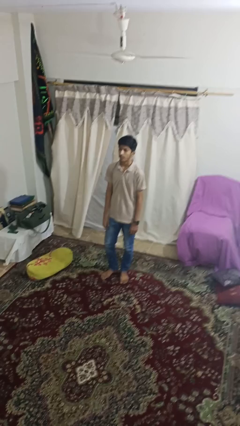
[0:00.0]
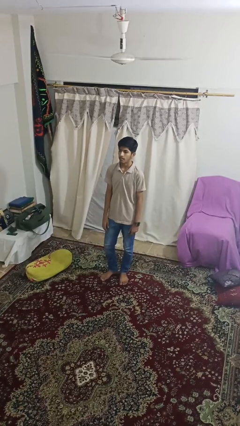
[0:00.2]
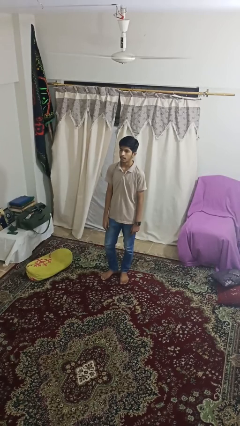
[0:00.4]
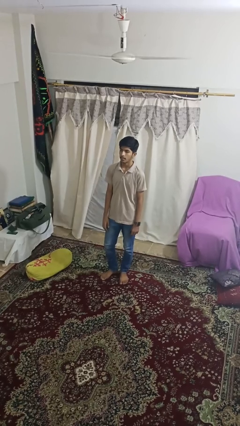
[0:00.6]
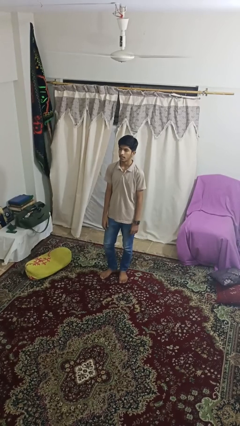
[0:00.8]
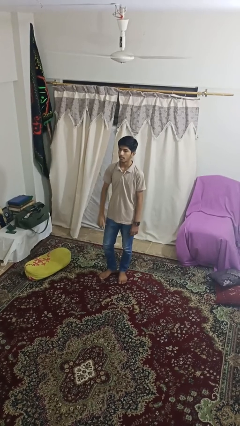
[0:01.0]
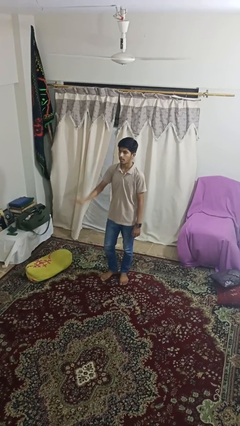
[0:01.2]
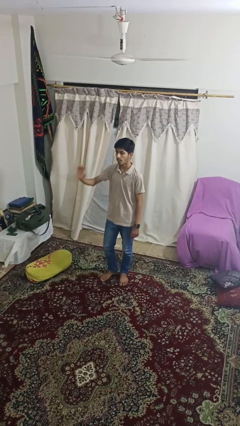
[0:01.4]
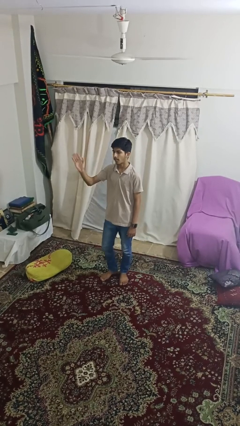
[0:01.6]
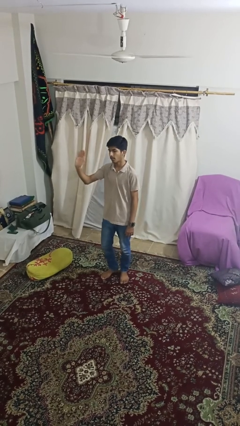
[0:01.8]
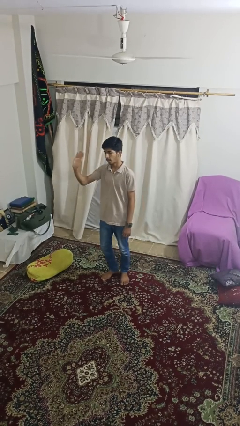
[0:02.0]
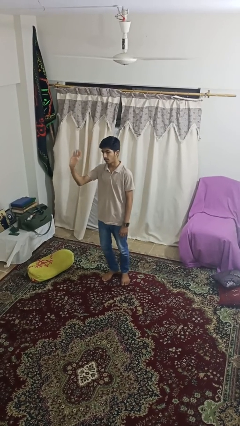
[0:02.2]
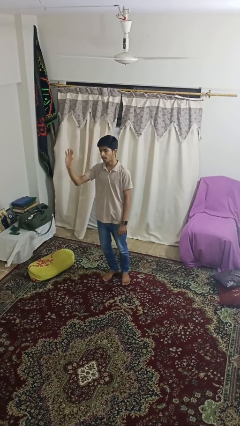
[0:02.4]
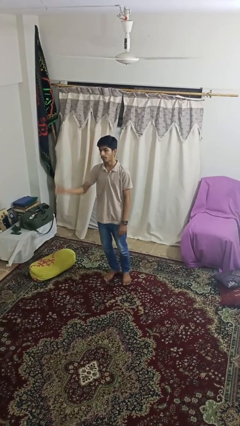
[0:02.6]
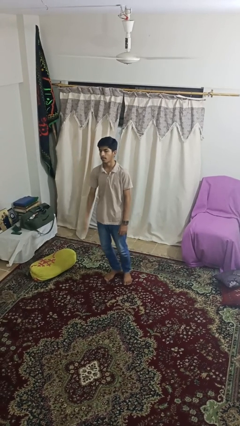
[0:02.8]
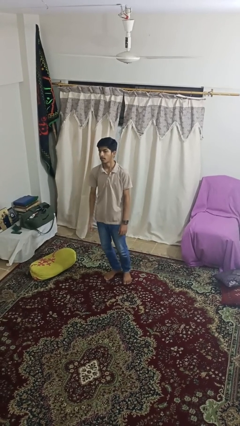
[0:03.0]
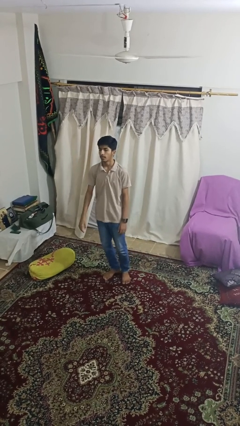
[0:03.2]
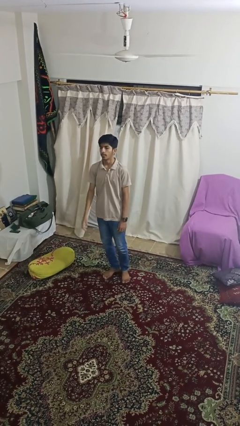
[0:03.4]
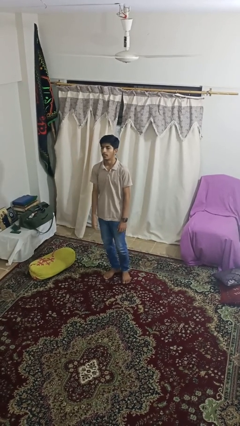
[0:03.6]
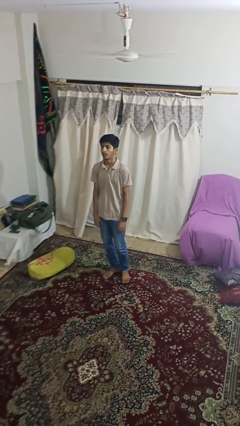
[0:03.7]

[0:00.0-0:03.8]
person waves at person

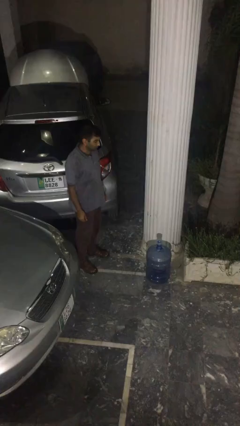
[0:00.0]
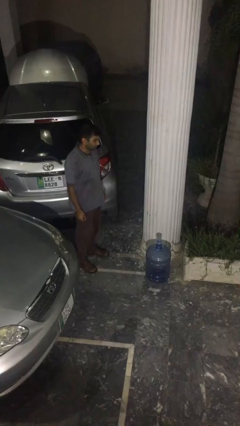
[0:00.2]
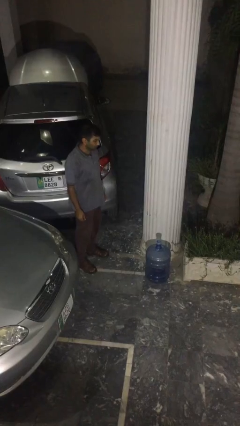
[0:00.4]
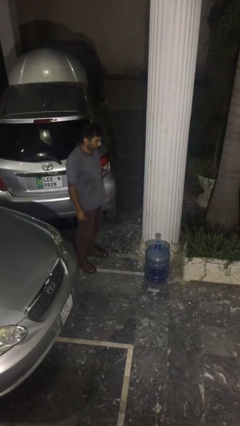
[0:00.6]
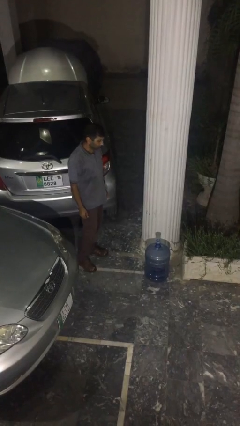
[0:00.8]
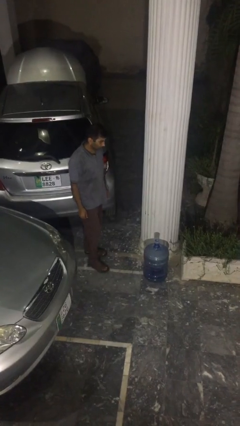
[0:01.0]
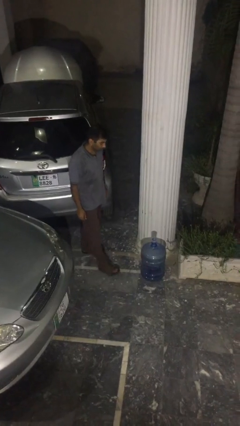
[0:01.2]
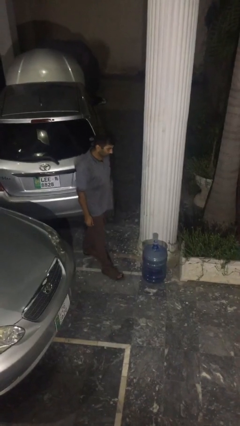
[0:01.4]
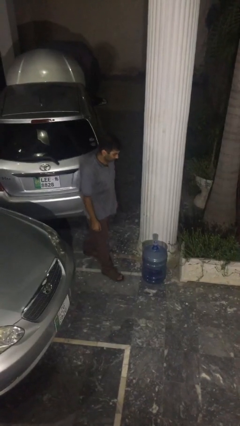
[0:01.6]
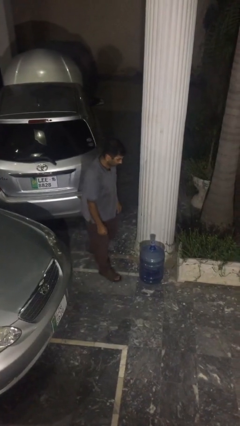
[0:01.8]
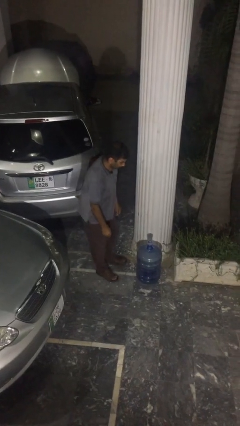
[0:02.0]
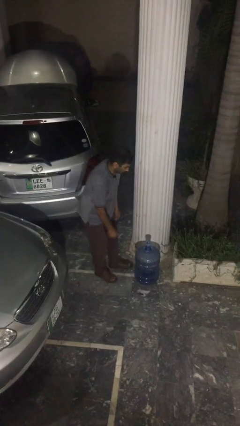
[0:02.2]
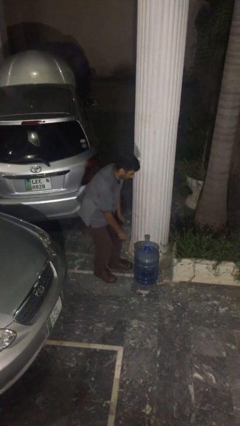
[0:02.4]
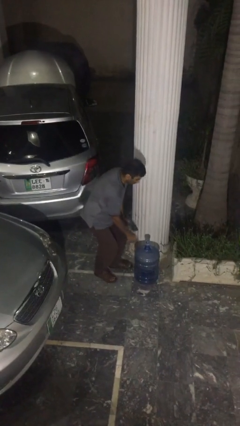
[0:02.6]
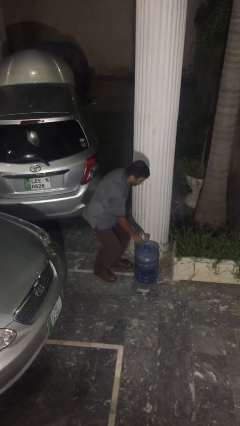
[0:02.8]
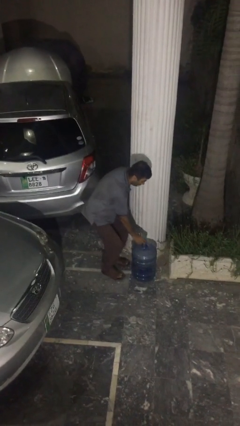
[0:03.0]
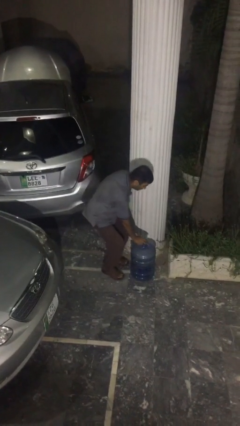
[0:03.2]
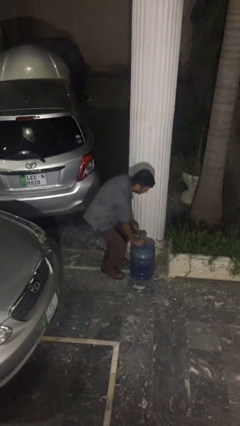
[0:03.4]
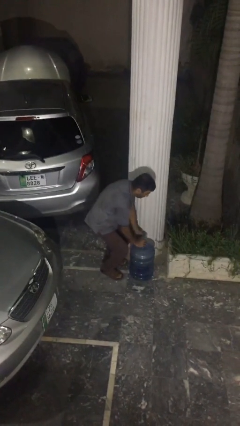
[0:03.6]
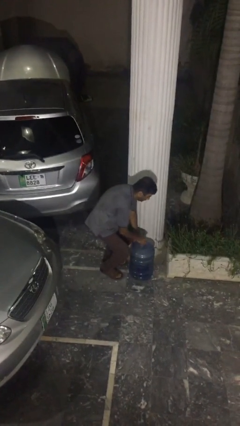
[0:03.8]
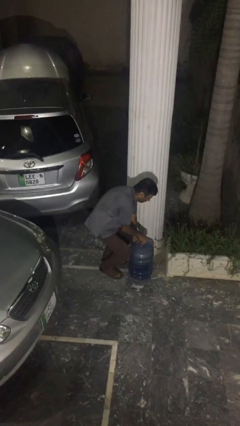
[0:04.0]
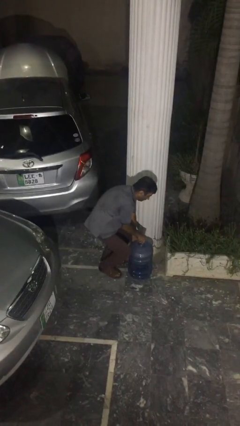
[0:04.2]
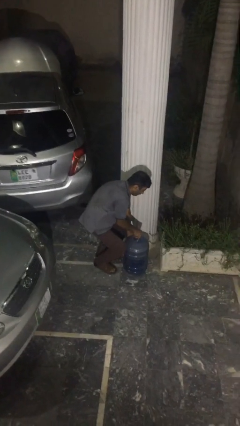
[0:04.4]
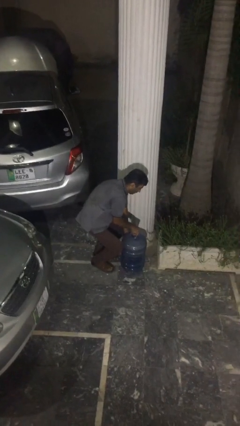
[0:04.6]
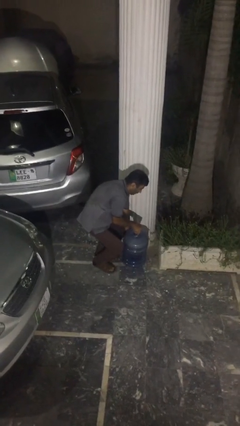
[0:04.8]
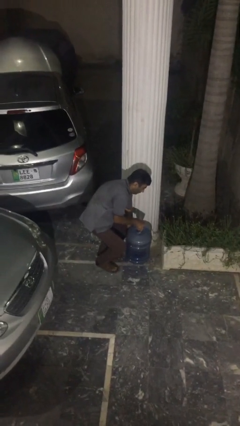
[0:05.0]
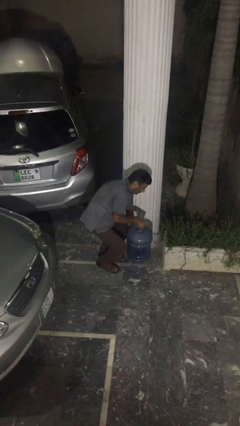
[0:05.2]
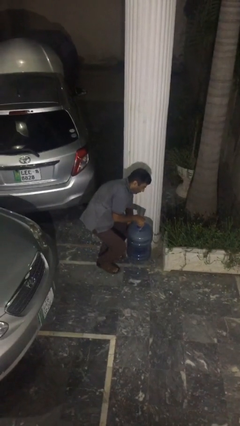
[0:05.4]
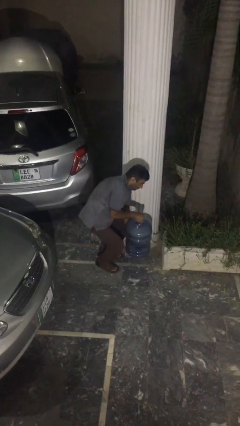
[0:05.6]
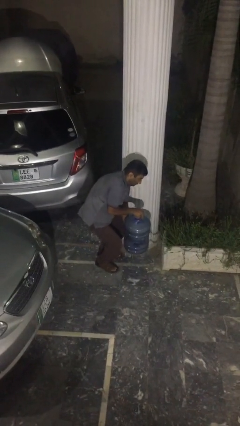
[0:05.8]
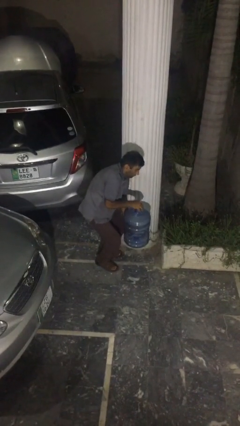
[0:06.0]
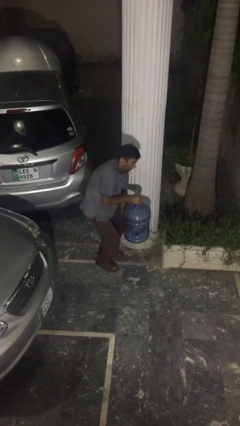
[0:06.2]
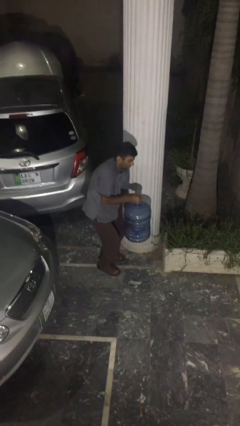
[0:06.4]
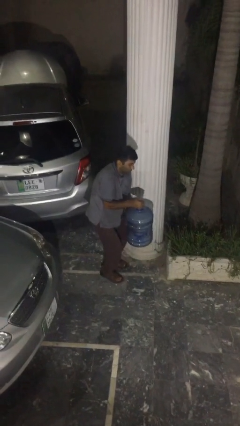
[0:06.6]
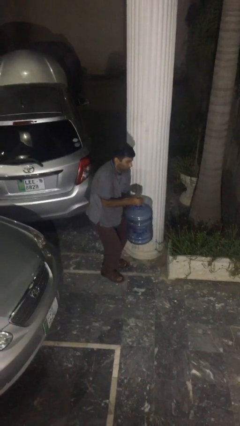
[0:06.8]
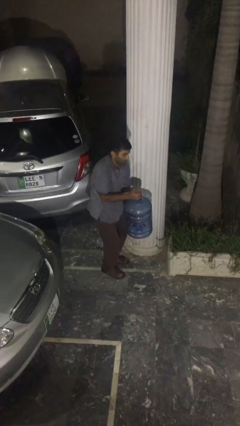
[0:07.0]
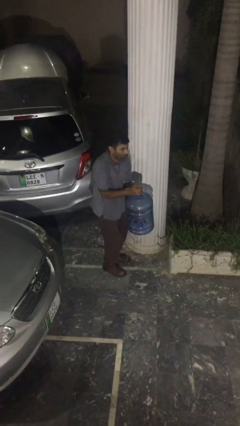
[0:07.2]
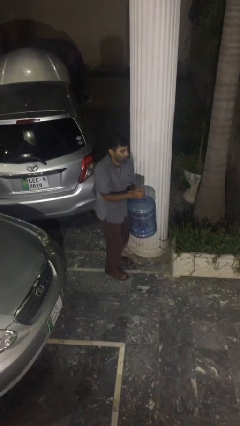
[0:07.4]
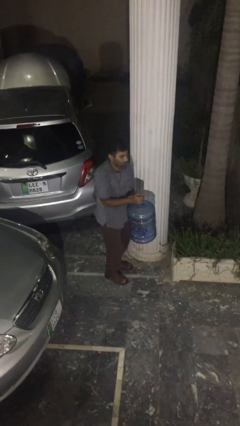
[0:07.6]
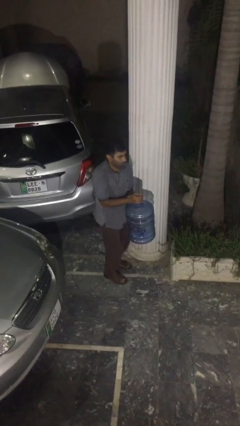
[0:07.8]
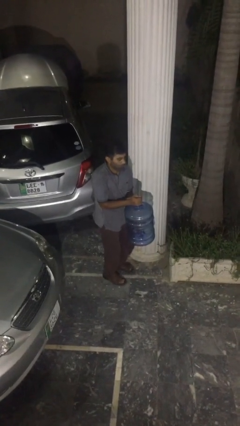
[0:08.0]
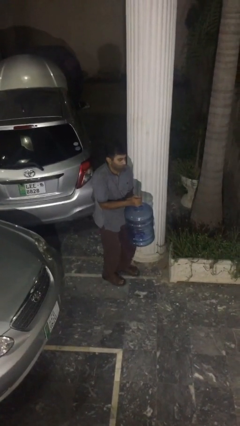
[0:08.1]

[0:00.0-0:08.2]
person picks up object from floor

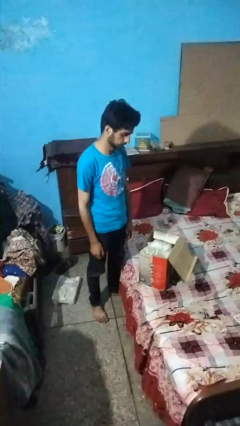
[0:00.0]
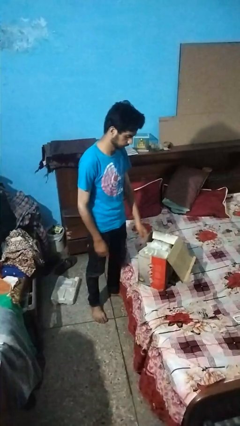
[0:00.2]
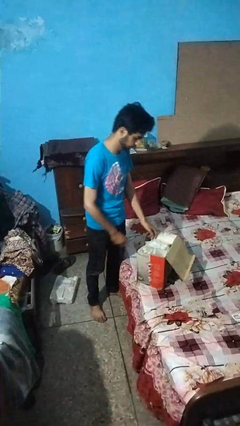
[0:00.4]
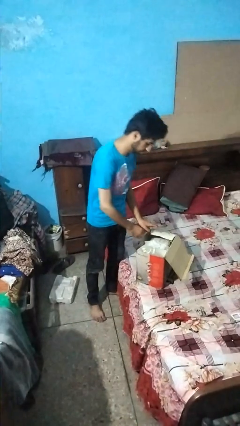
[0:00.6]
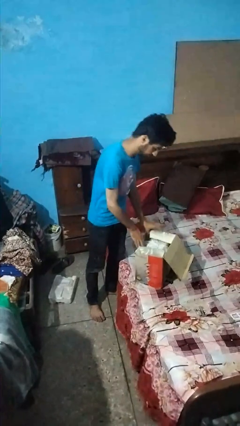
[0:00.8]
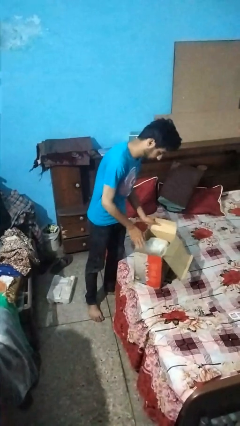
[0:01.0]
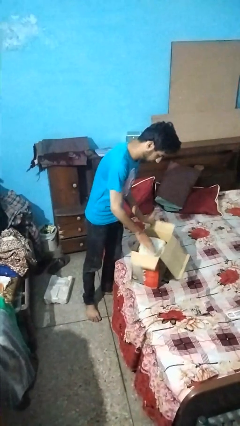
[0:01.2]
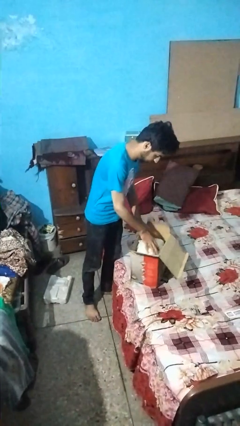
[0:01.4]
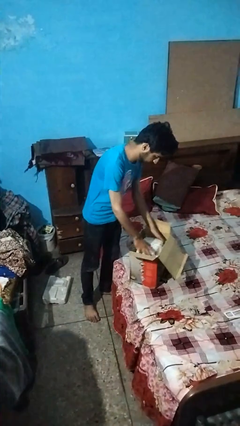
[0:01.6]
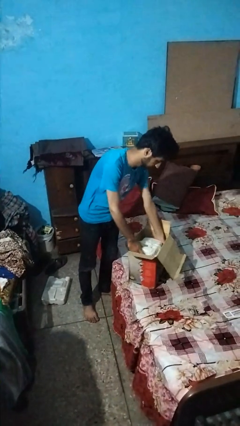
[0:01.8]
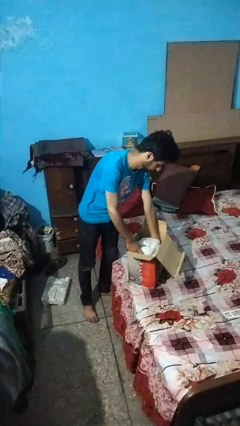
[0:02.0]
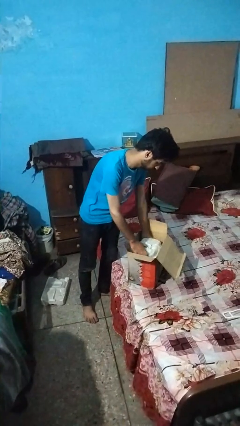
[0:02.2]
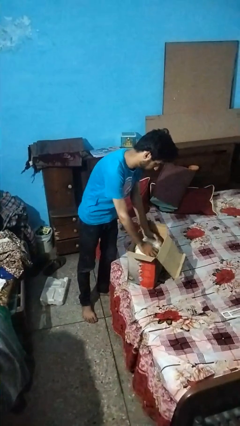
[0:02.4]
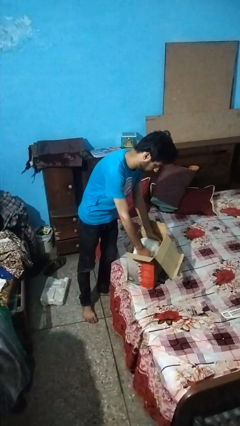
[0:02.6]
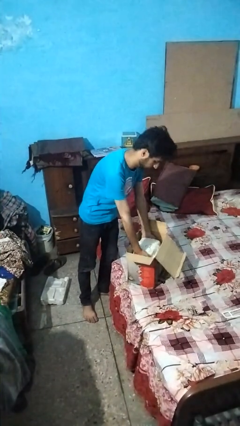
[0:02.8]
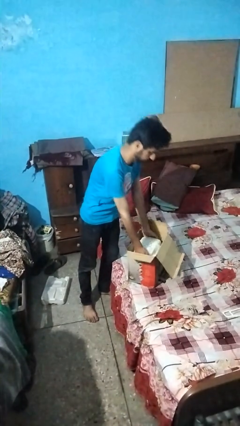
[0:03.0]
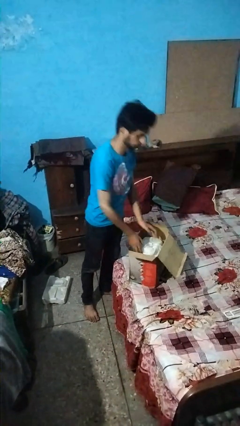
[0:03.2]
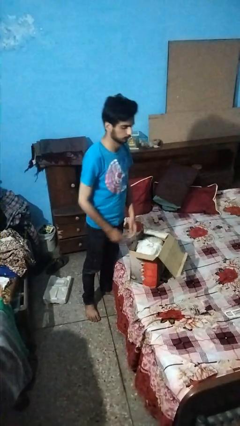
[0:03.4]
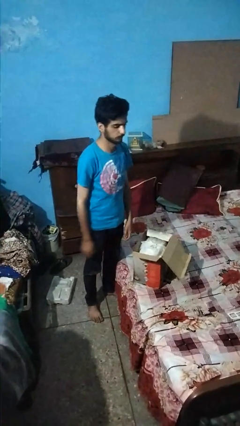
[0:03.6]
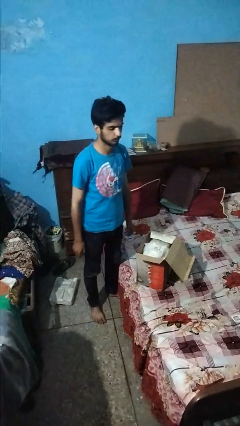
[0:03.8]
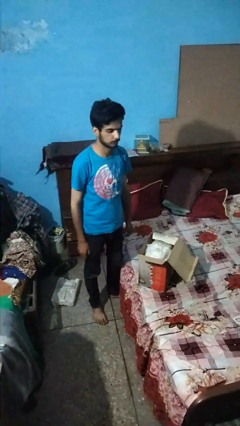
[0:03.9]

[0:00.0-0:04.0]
person searches in box

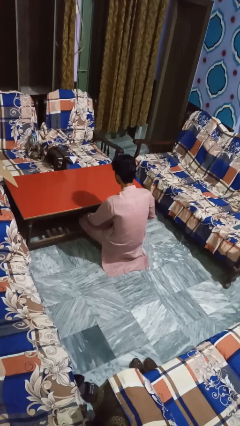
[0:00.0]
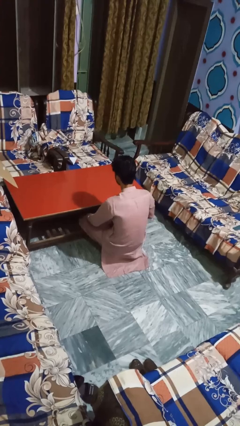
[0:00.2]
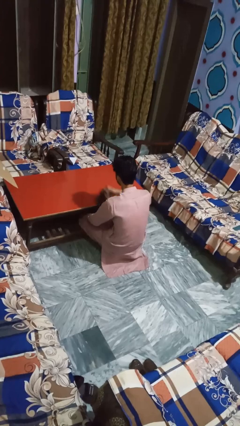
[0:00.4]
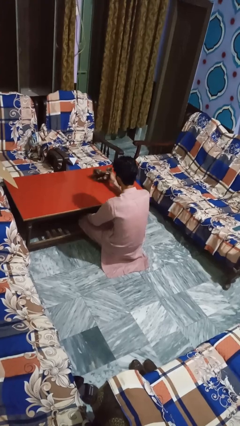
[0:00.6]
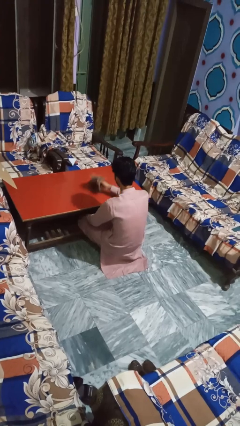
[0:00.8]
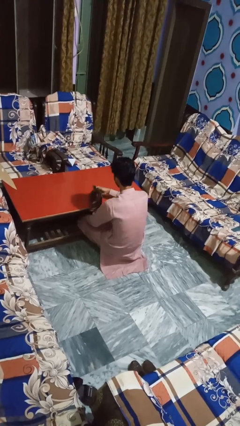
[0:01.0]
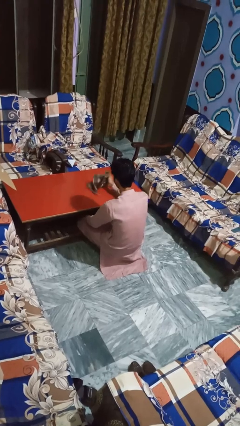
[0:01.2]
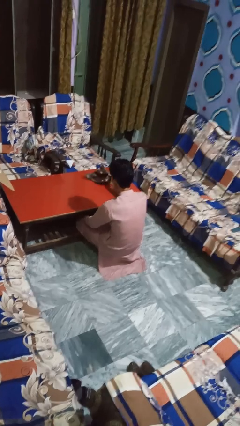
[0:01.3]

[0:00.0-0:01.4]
person cleans table with rag

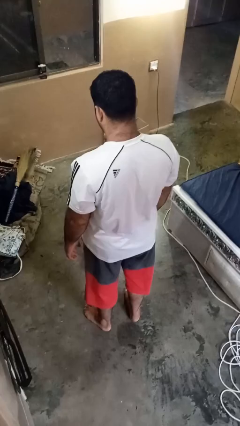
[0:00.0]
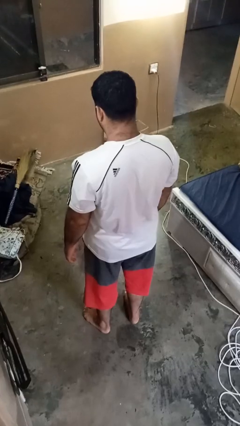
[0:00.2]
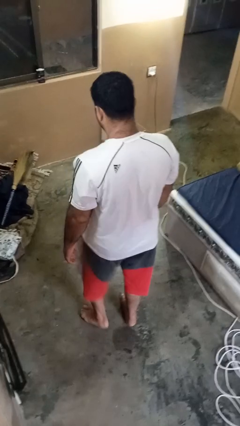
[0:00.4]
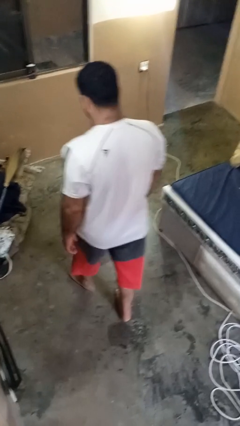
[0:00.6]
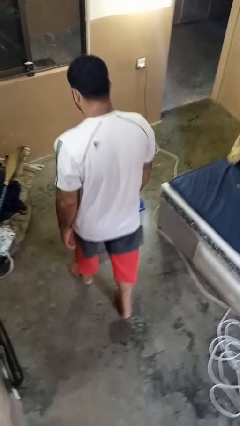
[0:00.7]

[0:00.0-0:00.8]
person lies down on floor
